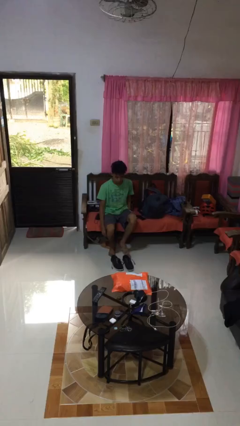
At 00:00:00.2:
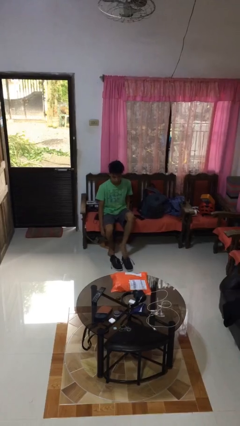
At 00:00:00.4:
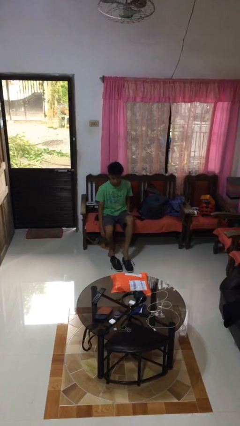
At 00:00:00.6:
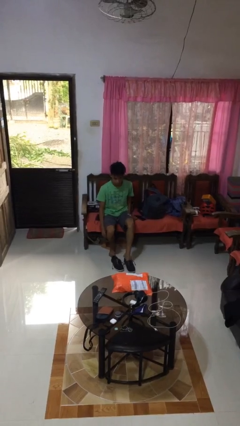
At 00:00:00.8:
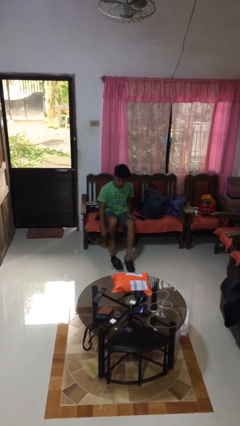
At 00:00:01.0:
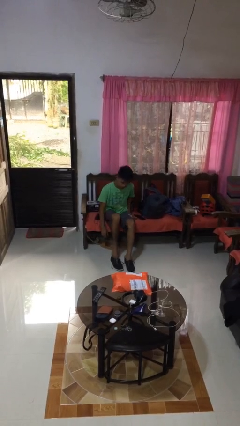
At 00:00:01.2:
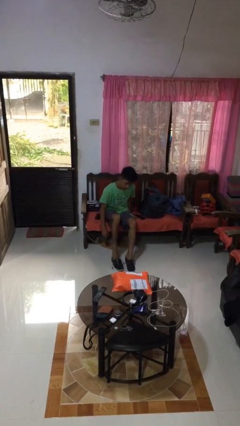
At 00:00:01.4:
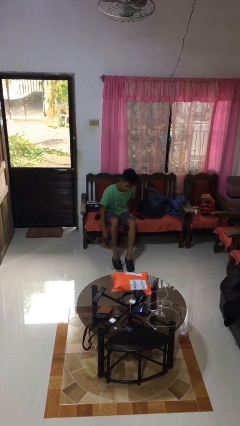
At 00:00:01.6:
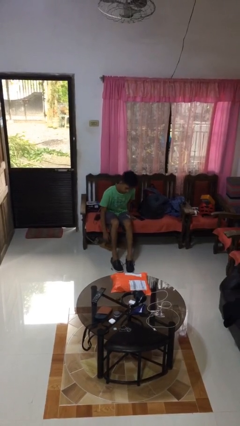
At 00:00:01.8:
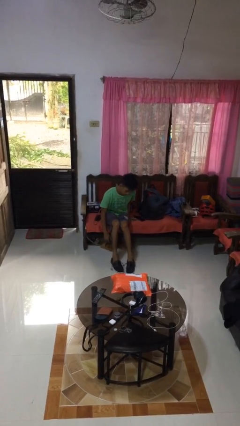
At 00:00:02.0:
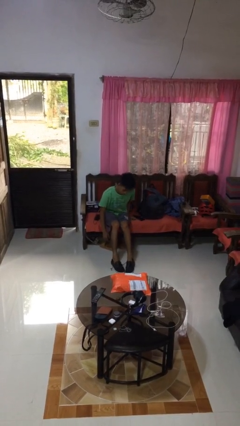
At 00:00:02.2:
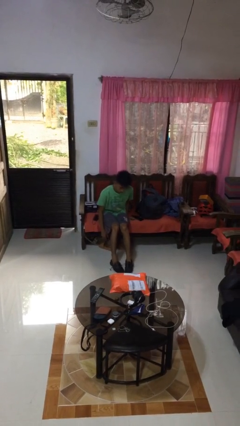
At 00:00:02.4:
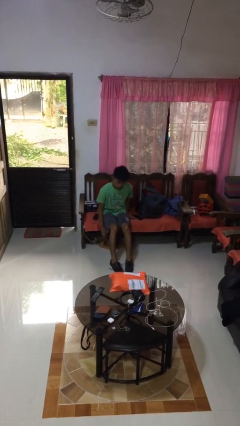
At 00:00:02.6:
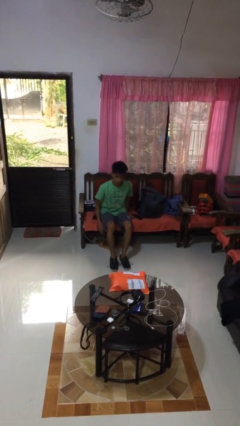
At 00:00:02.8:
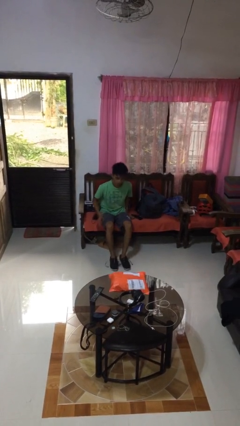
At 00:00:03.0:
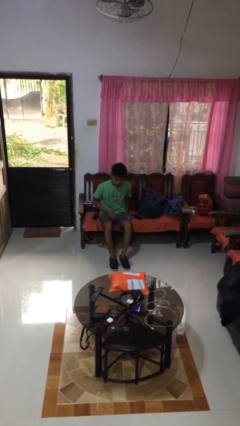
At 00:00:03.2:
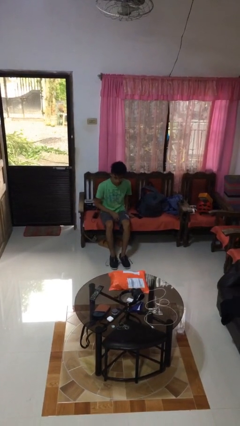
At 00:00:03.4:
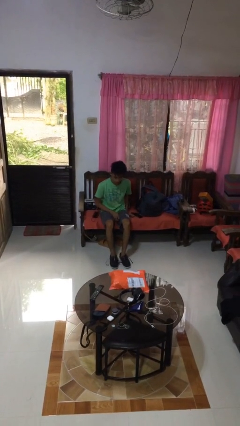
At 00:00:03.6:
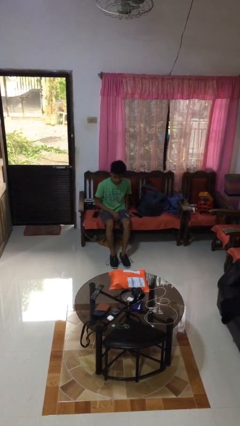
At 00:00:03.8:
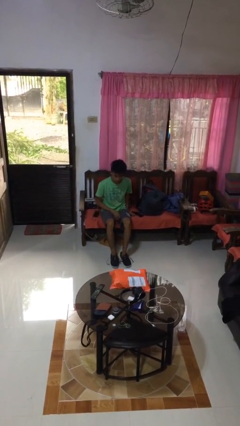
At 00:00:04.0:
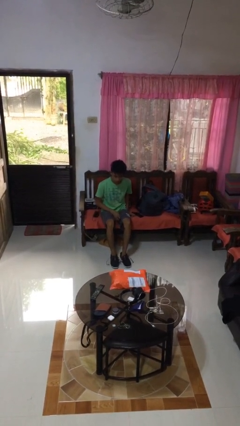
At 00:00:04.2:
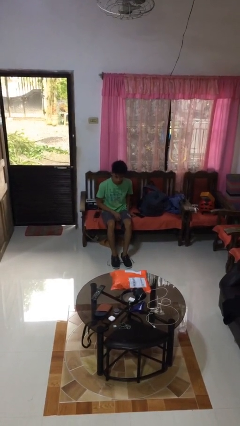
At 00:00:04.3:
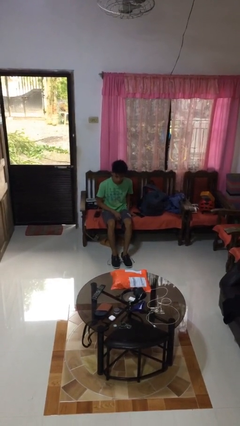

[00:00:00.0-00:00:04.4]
person puts on shoes

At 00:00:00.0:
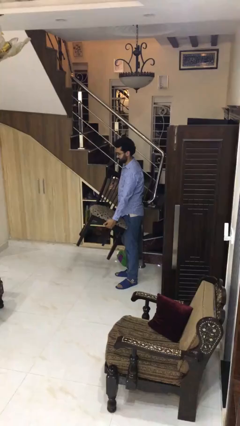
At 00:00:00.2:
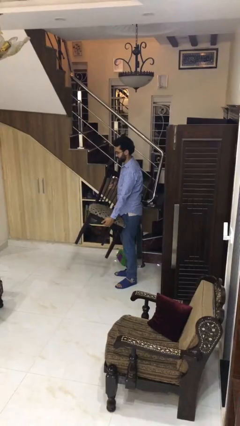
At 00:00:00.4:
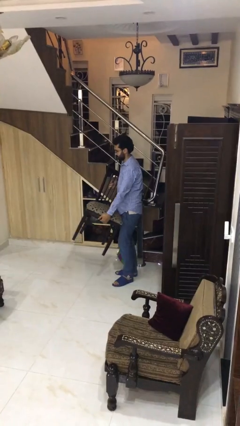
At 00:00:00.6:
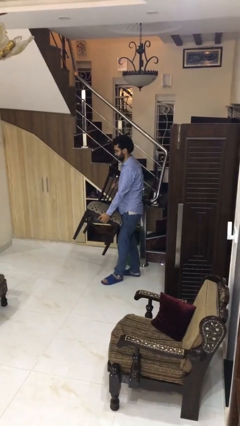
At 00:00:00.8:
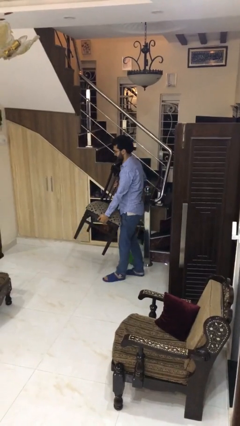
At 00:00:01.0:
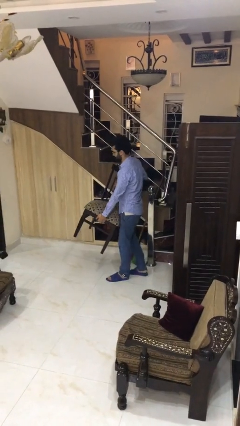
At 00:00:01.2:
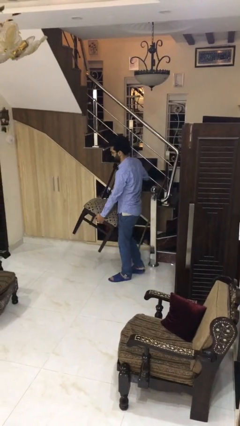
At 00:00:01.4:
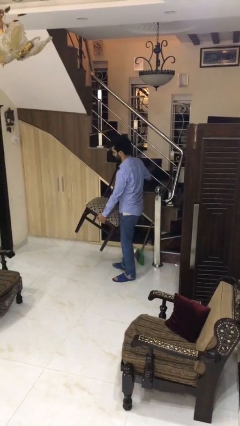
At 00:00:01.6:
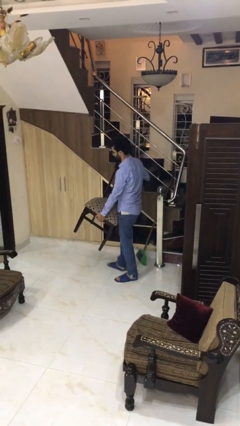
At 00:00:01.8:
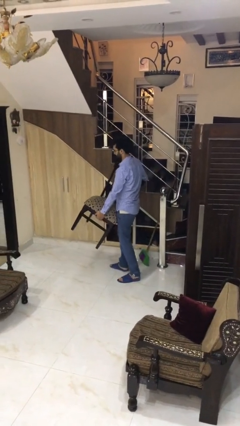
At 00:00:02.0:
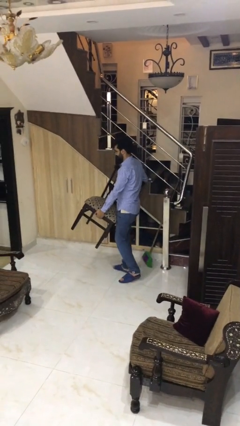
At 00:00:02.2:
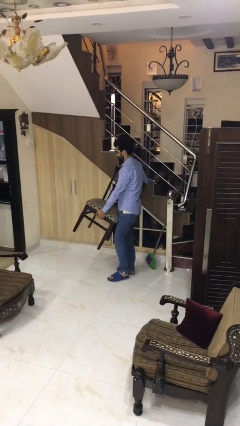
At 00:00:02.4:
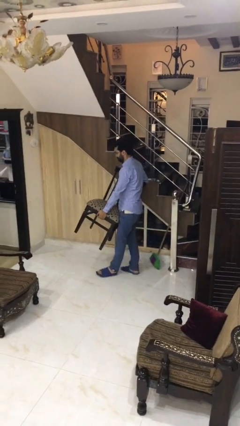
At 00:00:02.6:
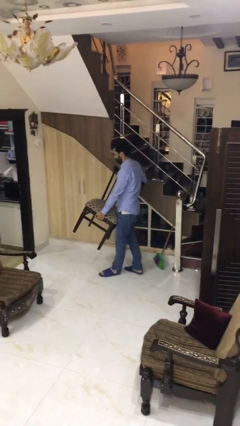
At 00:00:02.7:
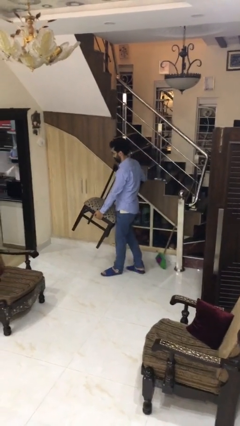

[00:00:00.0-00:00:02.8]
person carries heavy object

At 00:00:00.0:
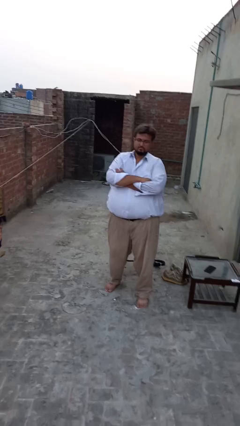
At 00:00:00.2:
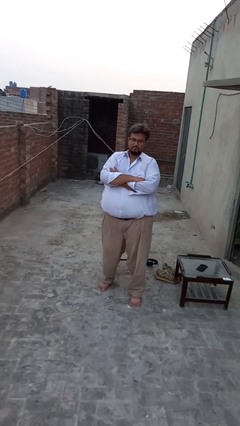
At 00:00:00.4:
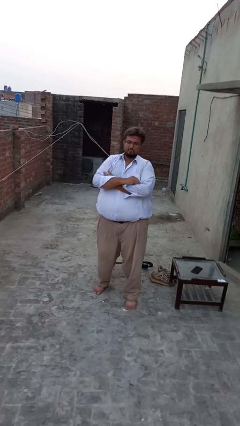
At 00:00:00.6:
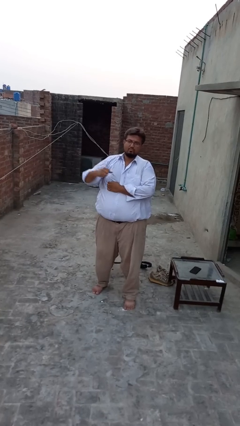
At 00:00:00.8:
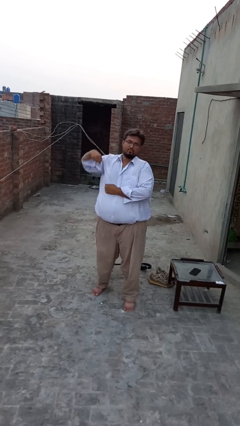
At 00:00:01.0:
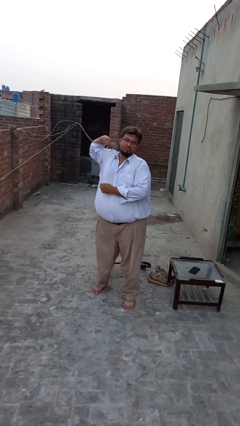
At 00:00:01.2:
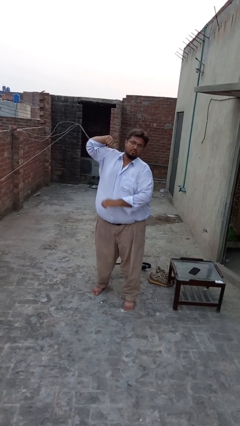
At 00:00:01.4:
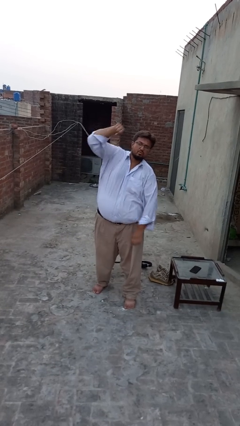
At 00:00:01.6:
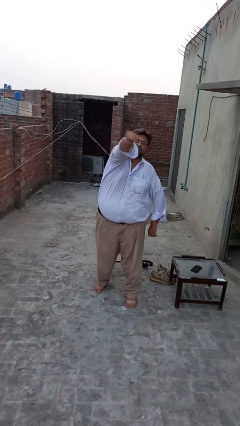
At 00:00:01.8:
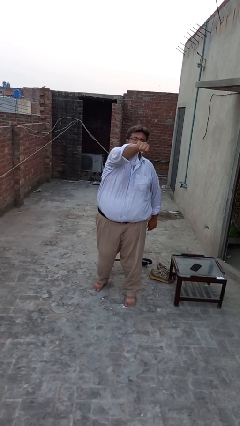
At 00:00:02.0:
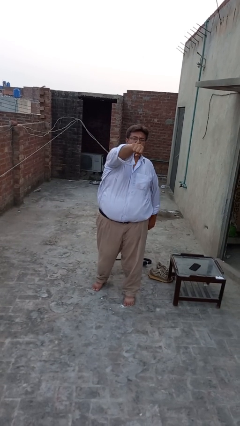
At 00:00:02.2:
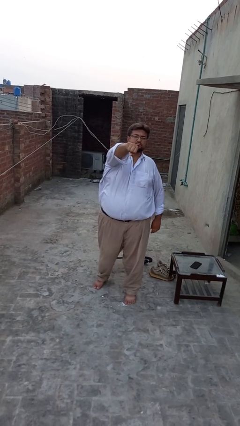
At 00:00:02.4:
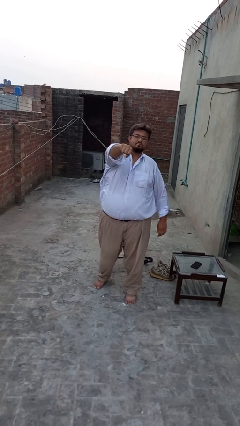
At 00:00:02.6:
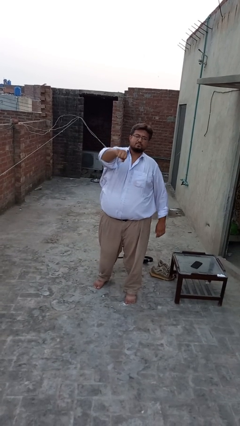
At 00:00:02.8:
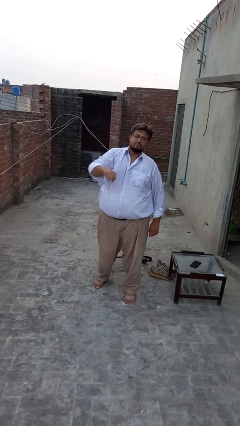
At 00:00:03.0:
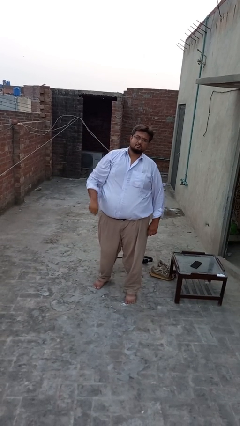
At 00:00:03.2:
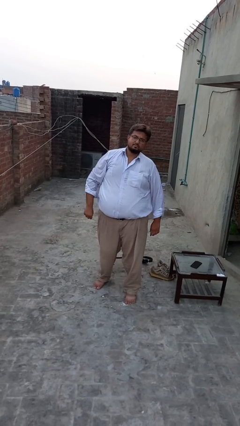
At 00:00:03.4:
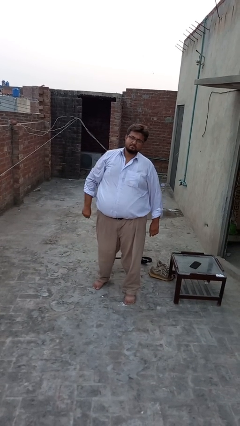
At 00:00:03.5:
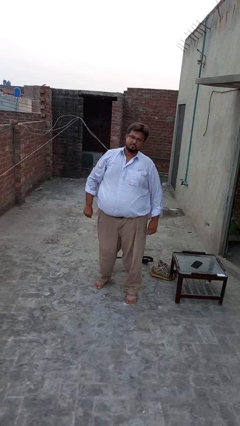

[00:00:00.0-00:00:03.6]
person punches

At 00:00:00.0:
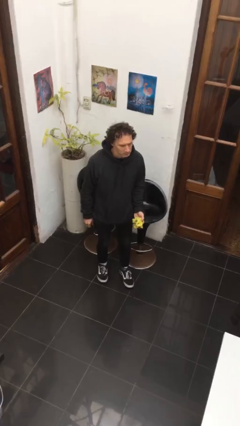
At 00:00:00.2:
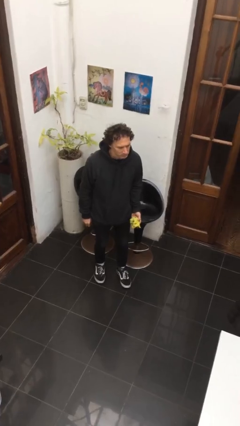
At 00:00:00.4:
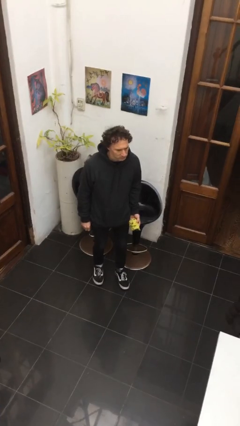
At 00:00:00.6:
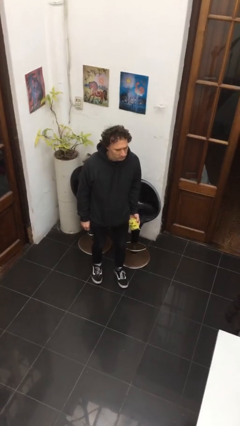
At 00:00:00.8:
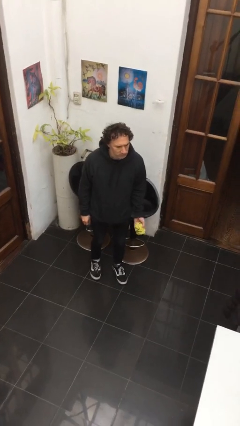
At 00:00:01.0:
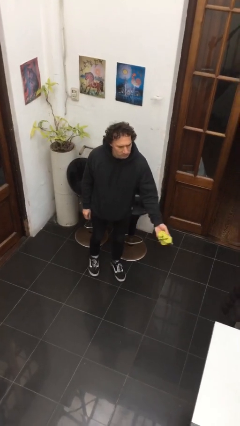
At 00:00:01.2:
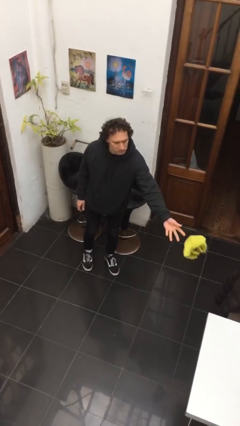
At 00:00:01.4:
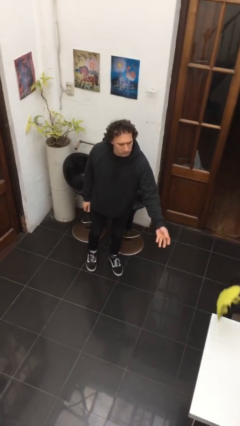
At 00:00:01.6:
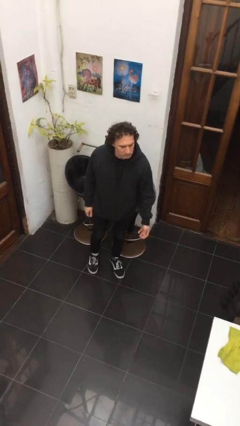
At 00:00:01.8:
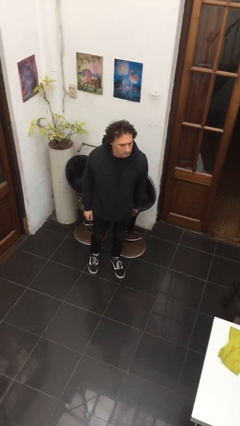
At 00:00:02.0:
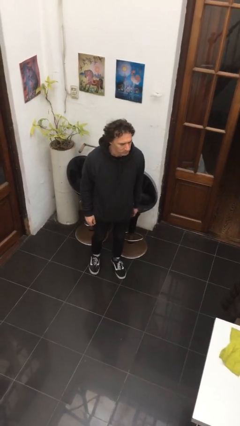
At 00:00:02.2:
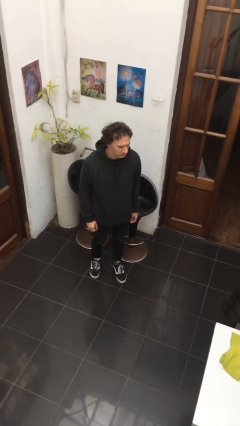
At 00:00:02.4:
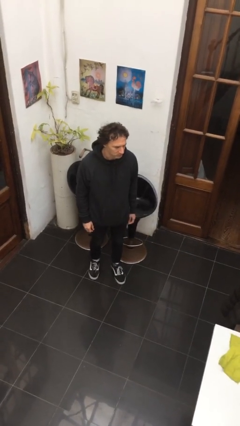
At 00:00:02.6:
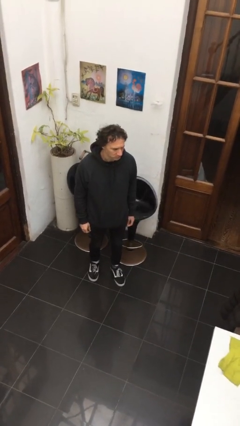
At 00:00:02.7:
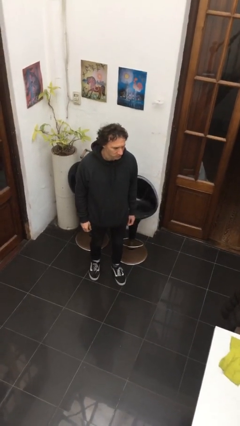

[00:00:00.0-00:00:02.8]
person throws object on table

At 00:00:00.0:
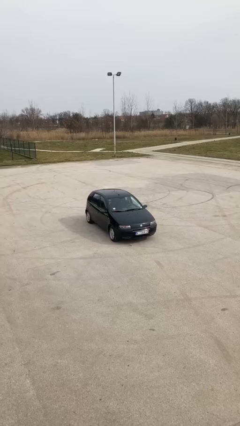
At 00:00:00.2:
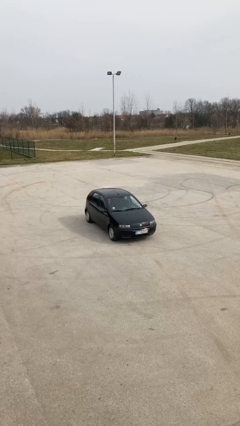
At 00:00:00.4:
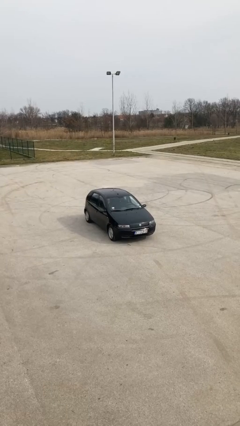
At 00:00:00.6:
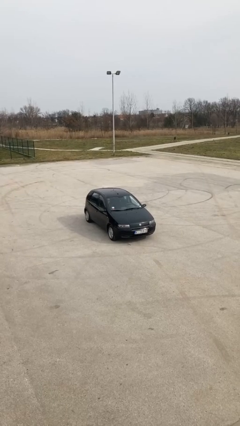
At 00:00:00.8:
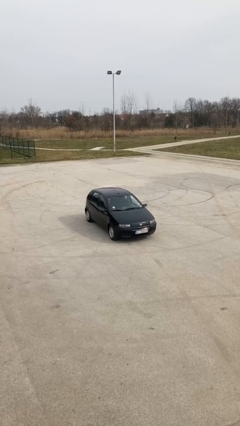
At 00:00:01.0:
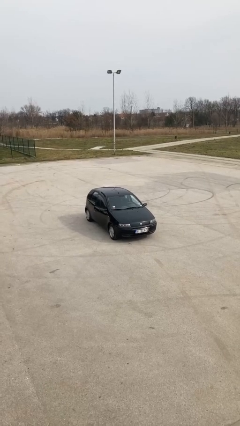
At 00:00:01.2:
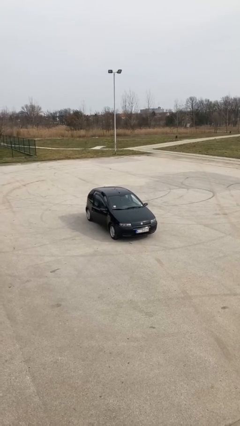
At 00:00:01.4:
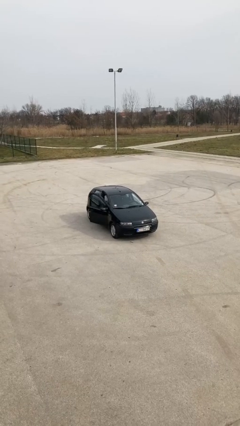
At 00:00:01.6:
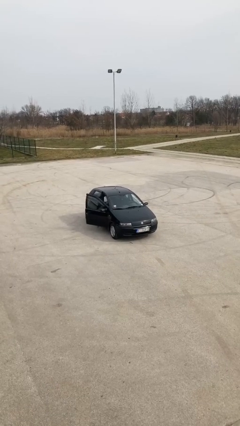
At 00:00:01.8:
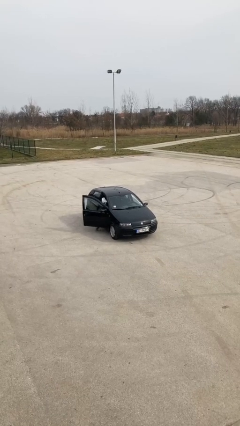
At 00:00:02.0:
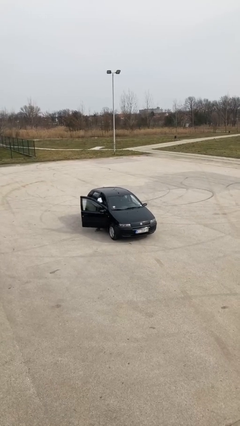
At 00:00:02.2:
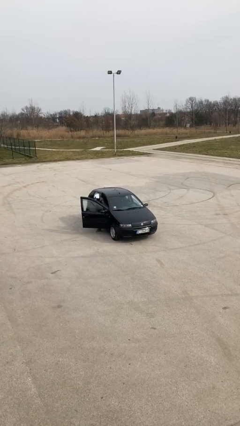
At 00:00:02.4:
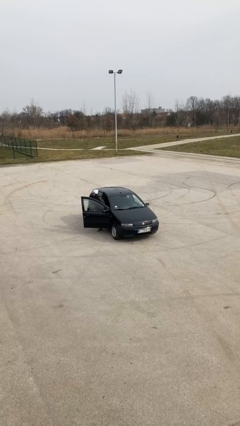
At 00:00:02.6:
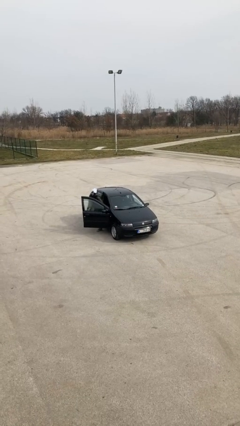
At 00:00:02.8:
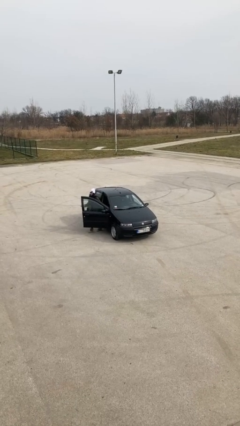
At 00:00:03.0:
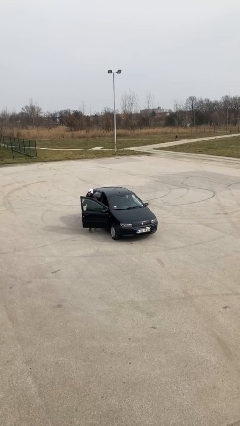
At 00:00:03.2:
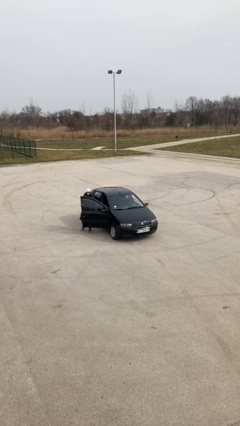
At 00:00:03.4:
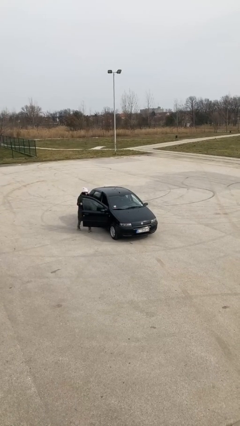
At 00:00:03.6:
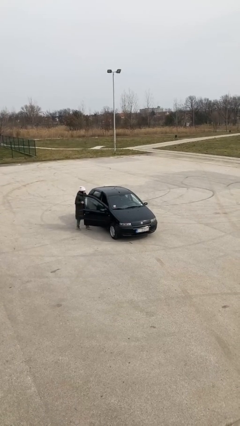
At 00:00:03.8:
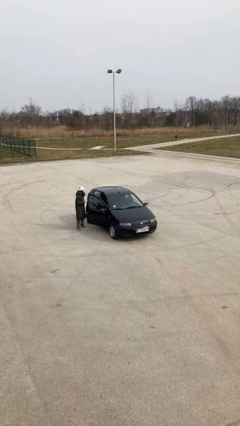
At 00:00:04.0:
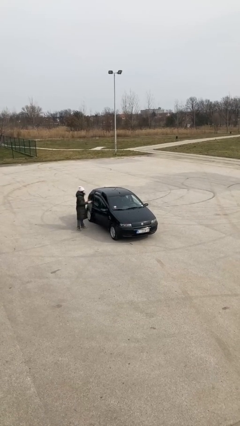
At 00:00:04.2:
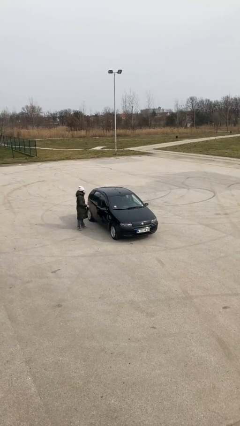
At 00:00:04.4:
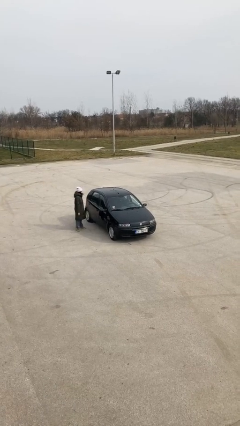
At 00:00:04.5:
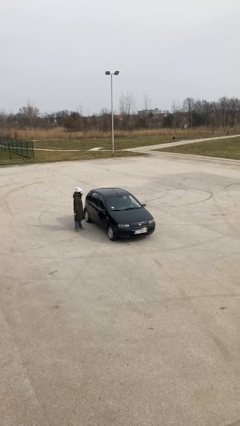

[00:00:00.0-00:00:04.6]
car drops off person
